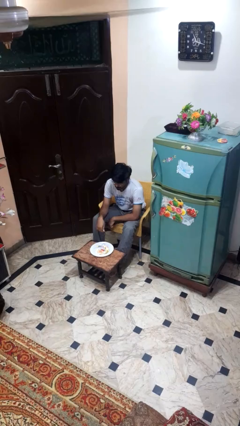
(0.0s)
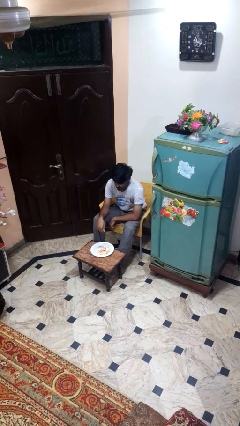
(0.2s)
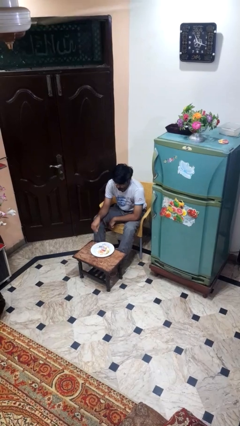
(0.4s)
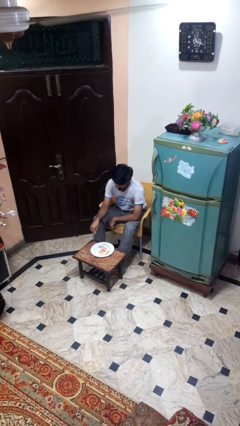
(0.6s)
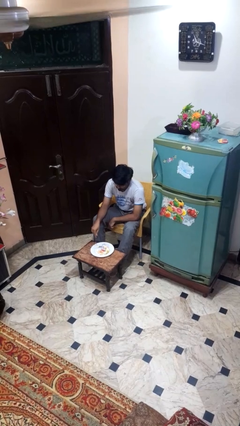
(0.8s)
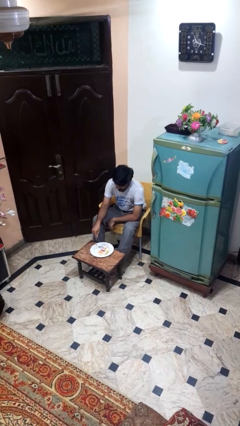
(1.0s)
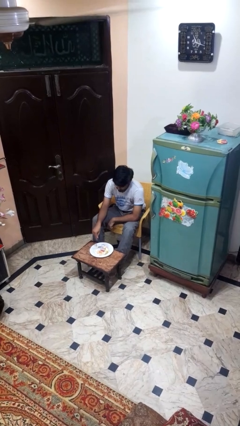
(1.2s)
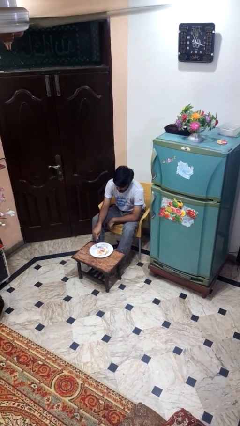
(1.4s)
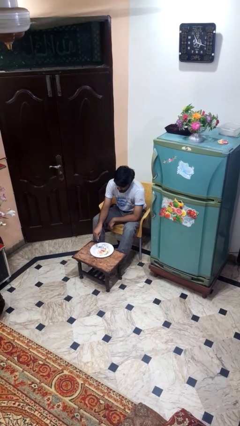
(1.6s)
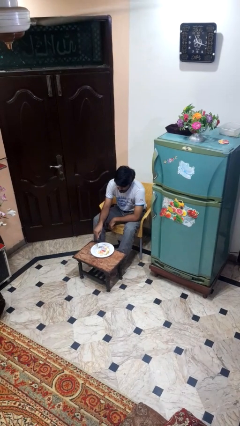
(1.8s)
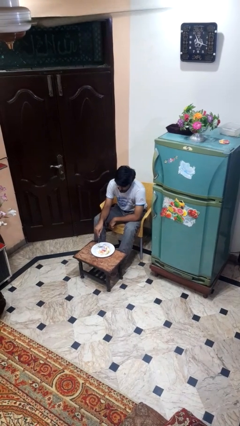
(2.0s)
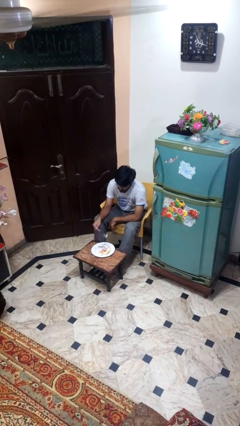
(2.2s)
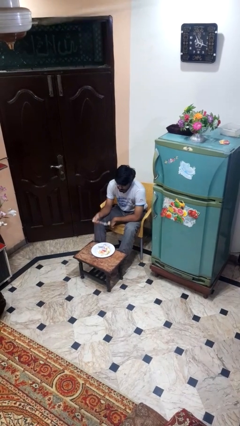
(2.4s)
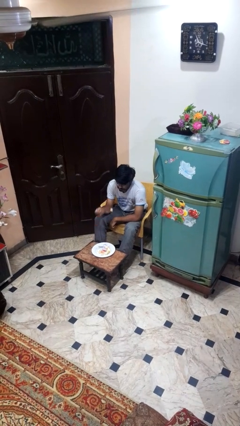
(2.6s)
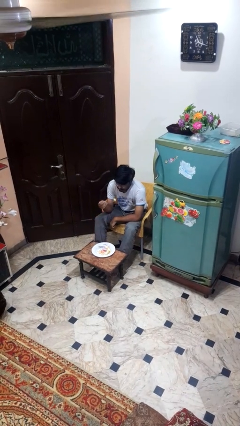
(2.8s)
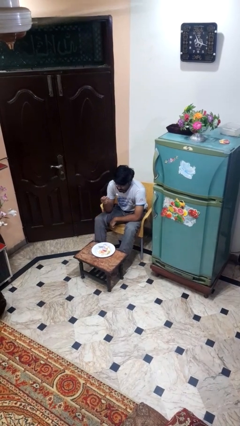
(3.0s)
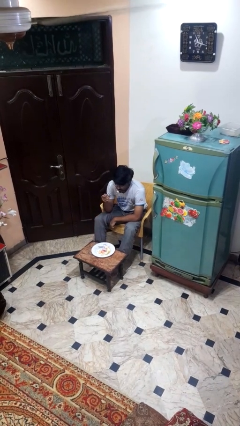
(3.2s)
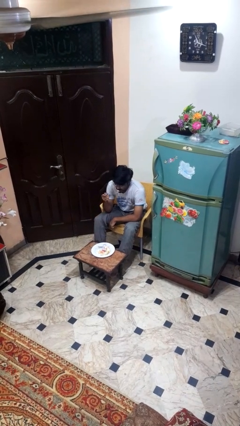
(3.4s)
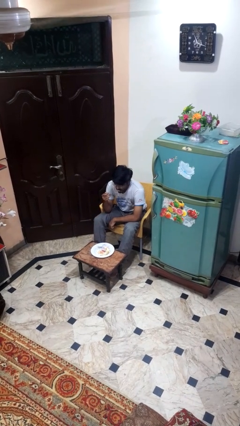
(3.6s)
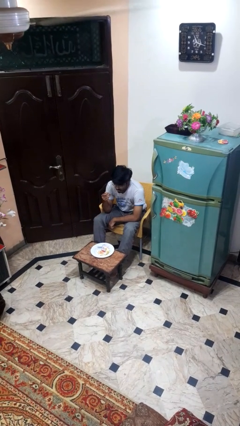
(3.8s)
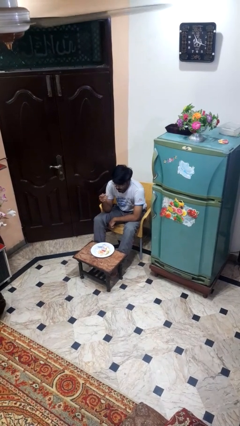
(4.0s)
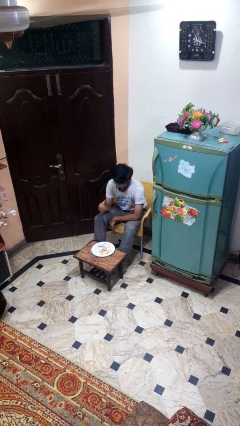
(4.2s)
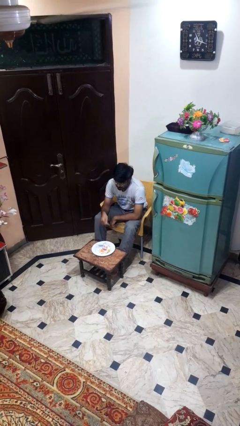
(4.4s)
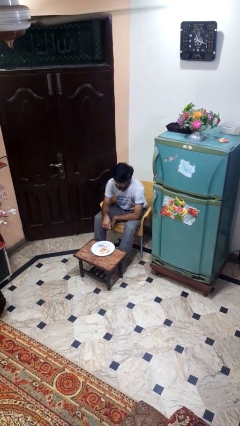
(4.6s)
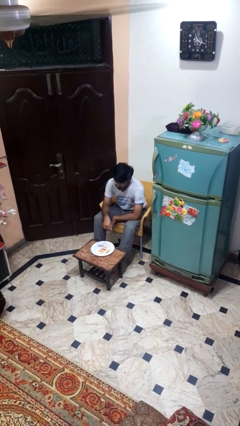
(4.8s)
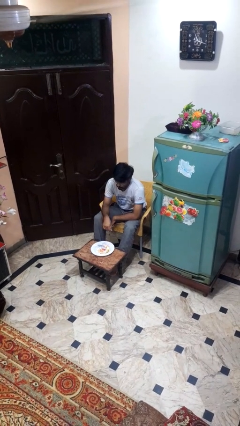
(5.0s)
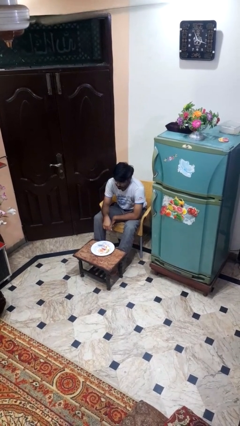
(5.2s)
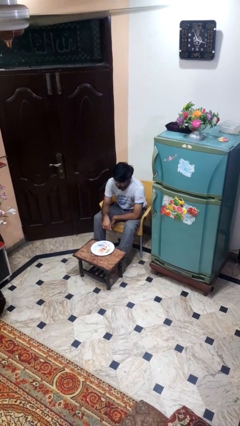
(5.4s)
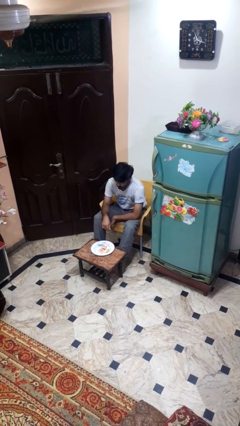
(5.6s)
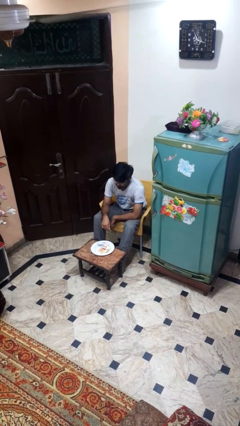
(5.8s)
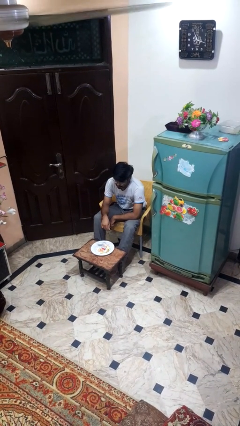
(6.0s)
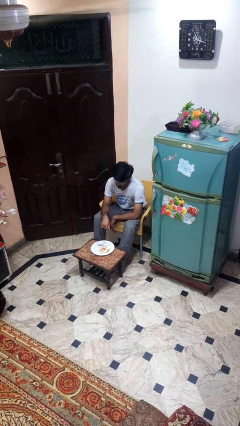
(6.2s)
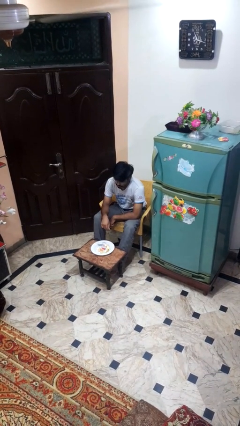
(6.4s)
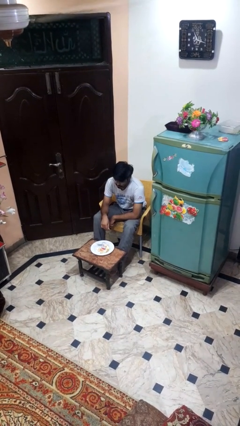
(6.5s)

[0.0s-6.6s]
person eats with utensil

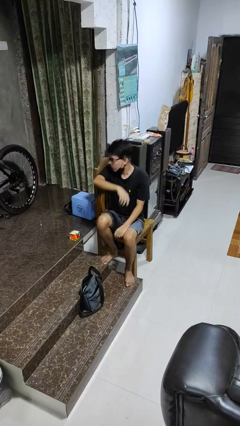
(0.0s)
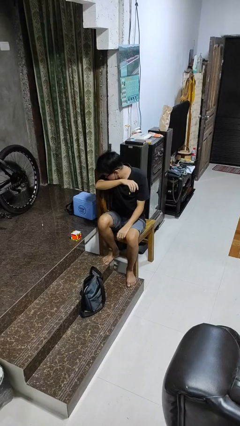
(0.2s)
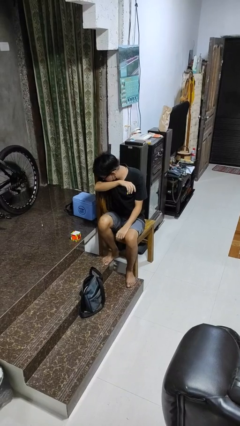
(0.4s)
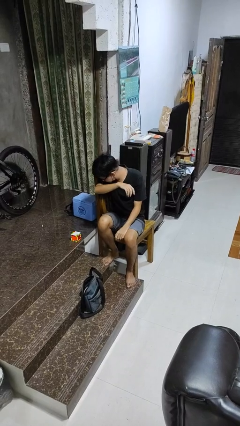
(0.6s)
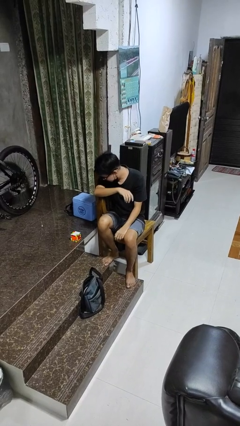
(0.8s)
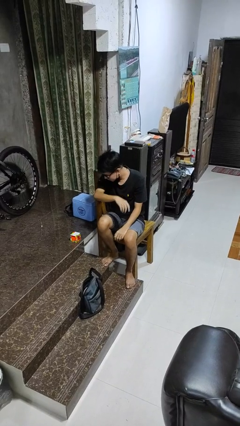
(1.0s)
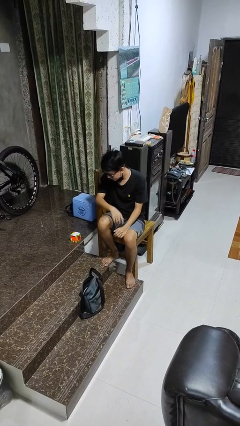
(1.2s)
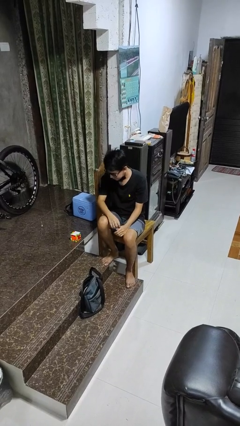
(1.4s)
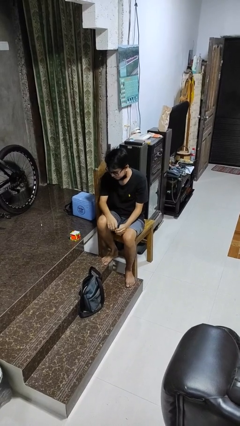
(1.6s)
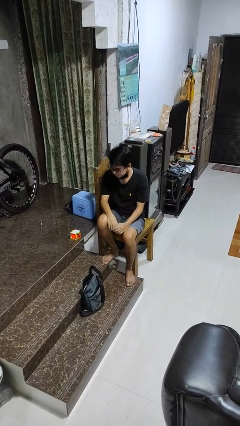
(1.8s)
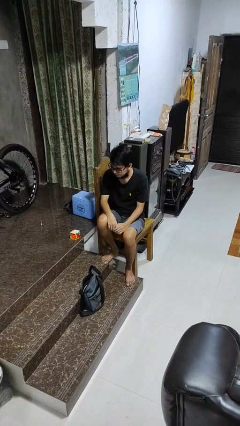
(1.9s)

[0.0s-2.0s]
person sneezes into arm

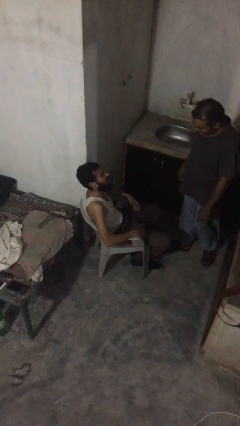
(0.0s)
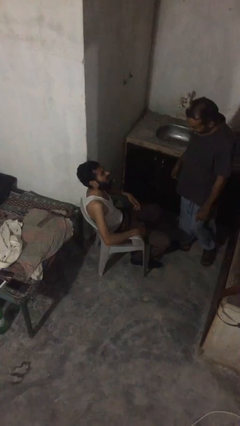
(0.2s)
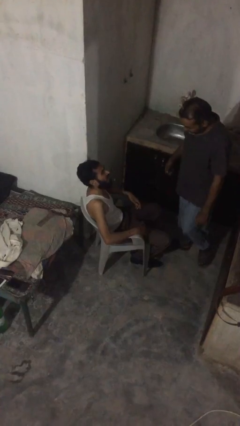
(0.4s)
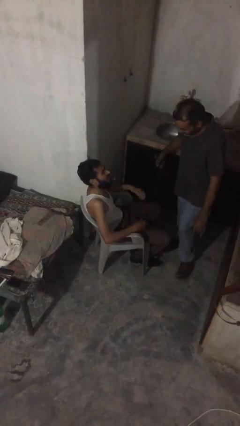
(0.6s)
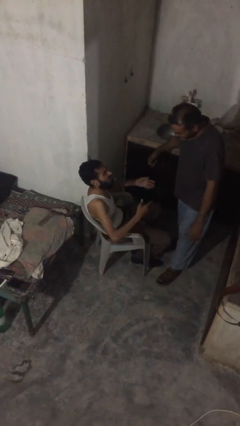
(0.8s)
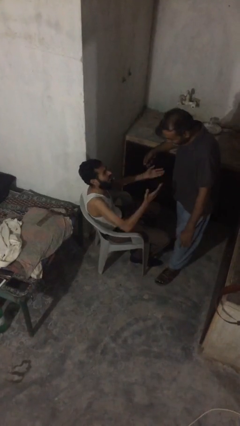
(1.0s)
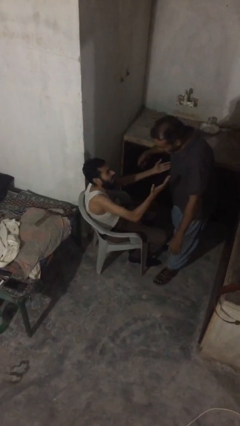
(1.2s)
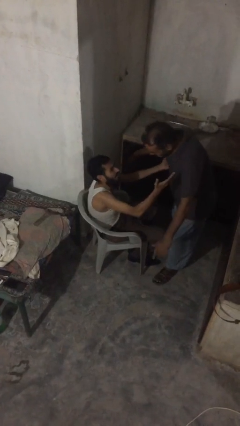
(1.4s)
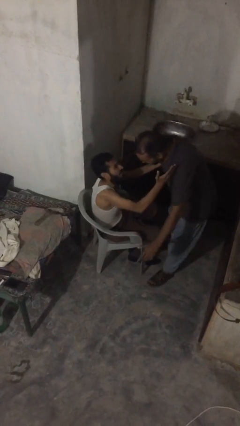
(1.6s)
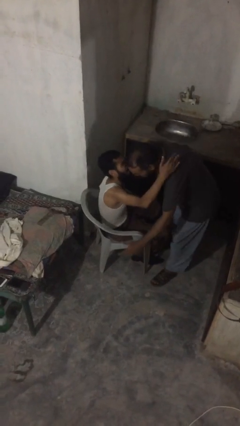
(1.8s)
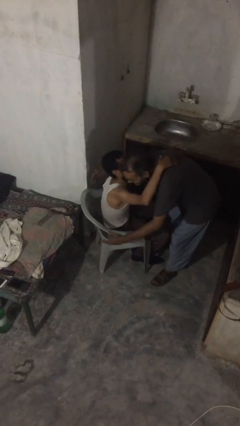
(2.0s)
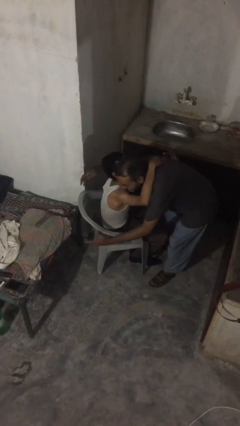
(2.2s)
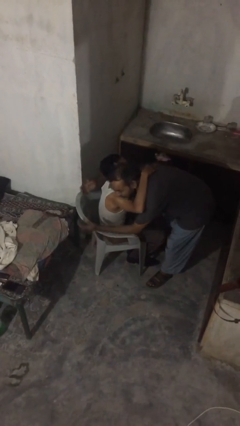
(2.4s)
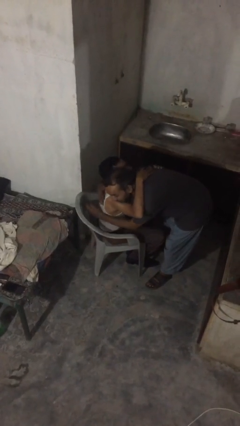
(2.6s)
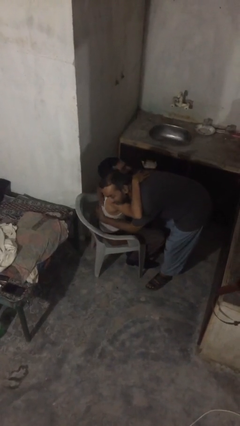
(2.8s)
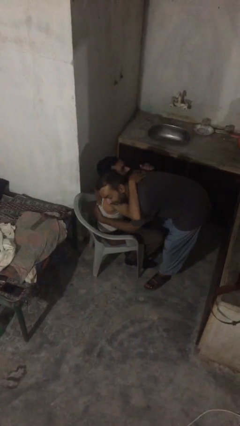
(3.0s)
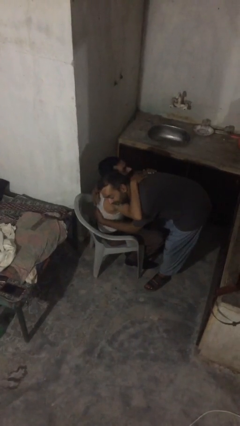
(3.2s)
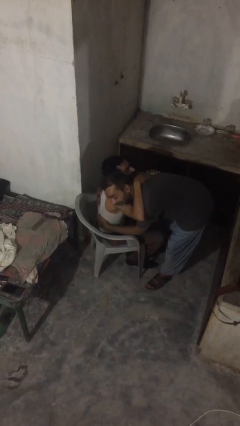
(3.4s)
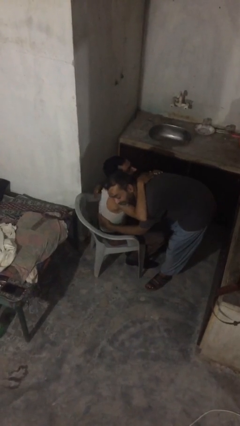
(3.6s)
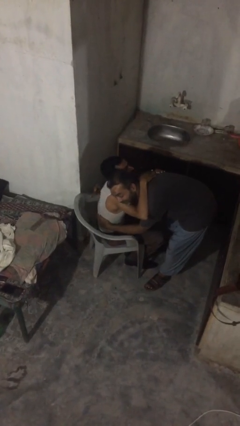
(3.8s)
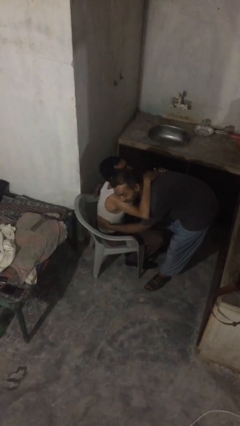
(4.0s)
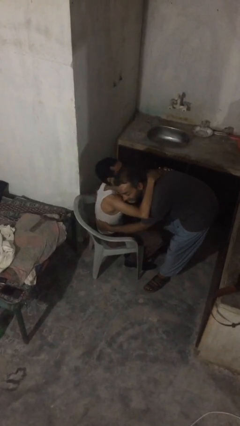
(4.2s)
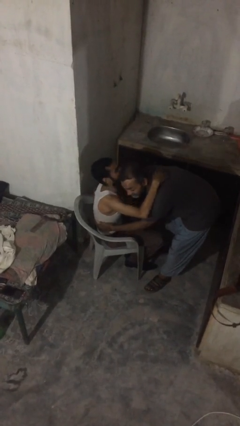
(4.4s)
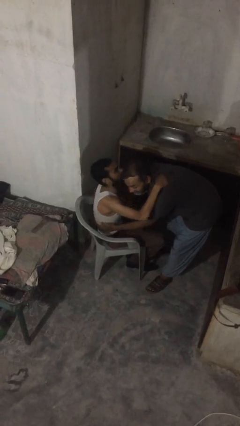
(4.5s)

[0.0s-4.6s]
person embraces person

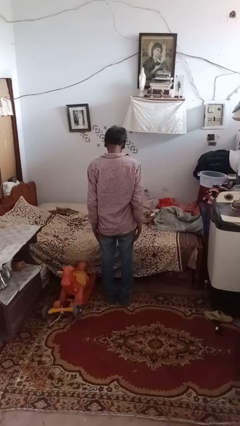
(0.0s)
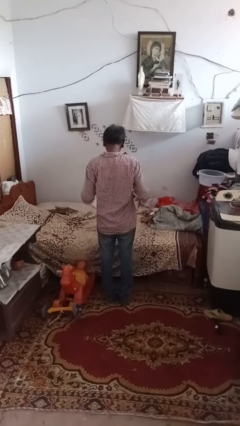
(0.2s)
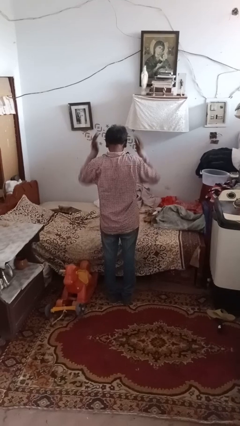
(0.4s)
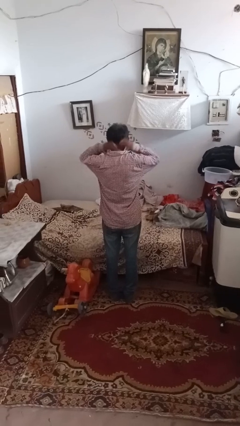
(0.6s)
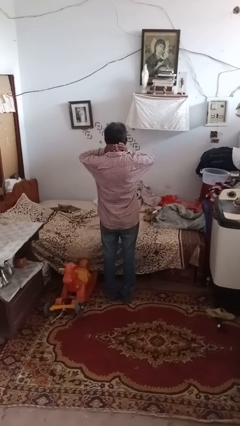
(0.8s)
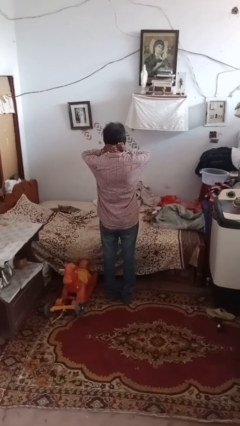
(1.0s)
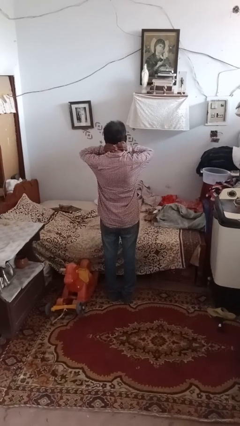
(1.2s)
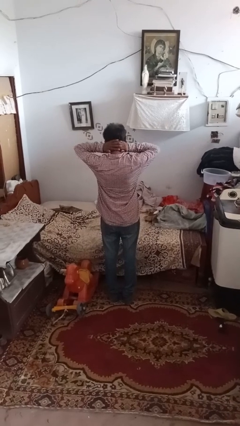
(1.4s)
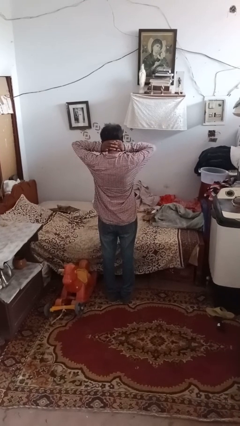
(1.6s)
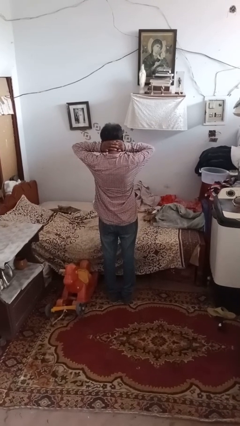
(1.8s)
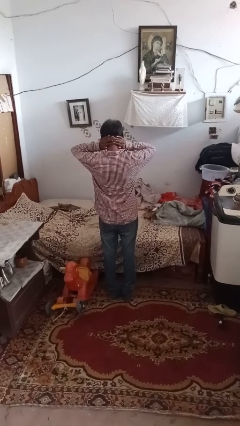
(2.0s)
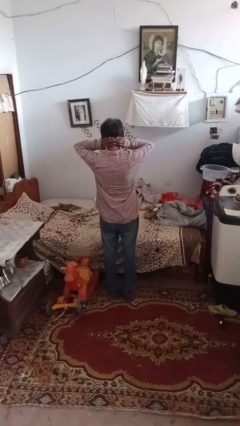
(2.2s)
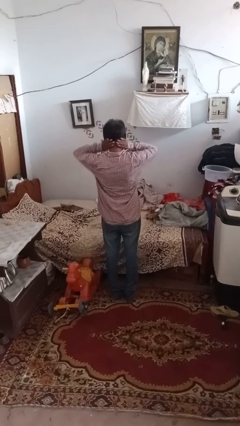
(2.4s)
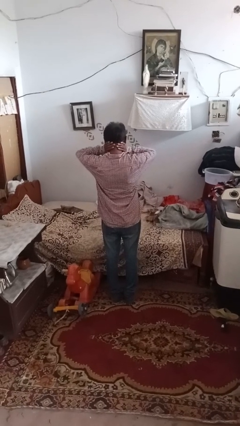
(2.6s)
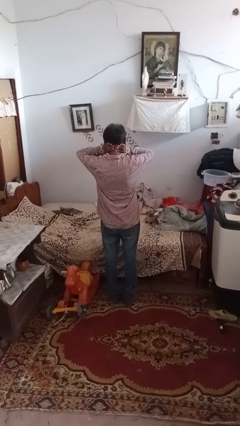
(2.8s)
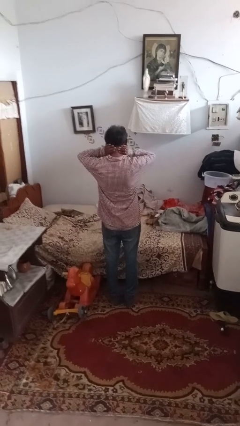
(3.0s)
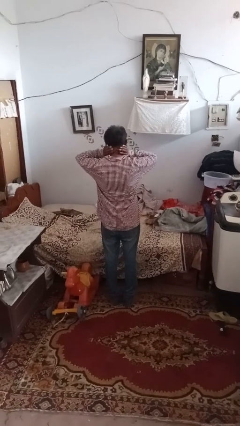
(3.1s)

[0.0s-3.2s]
person rubs neck

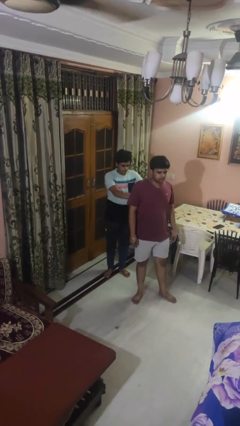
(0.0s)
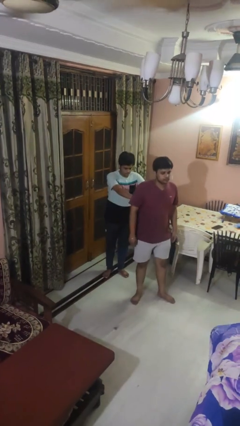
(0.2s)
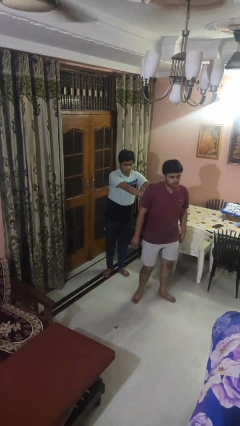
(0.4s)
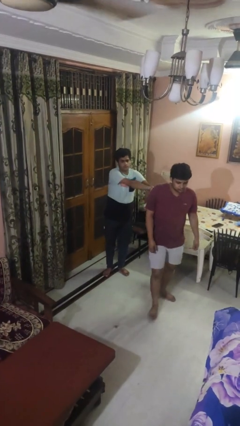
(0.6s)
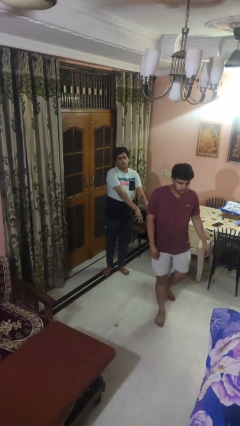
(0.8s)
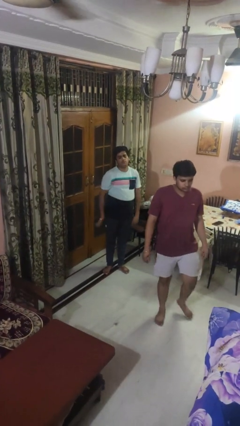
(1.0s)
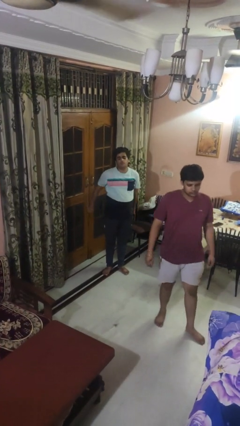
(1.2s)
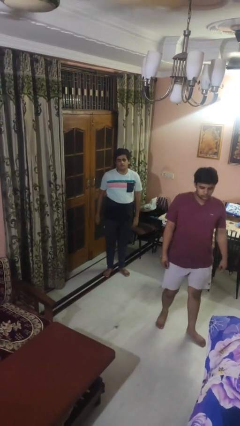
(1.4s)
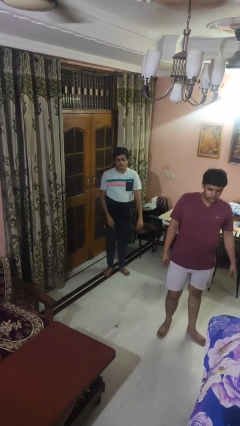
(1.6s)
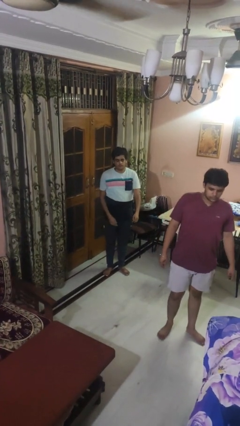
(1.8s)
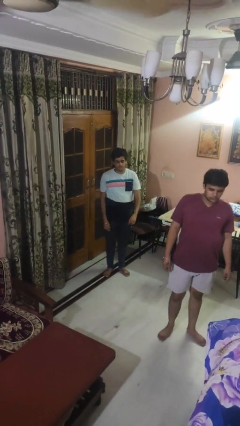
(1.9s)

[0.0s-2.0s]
person shoves person
